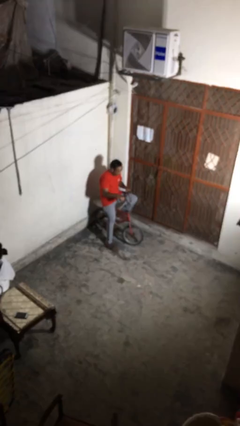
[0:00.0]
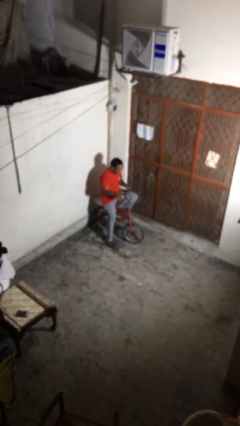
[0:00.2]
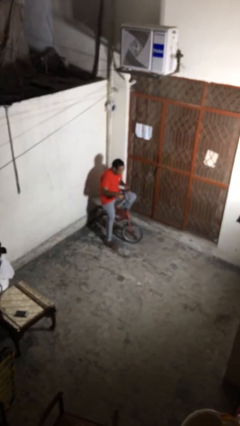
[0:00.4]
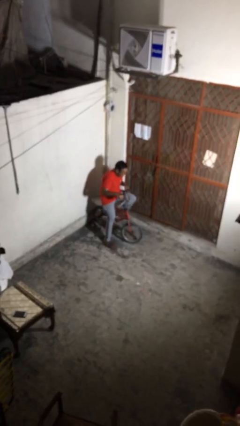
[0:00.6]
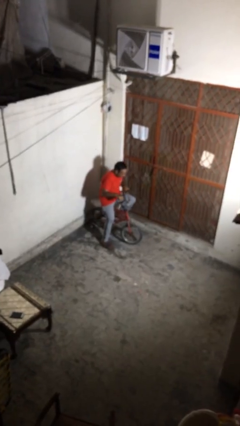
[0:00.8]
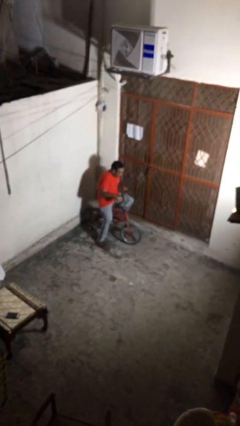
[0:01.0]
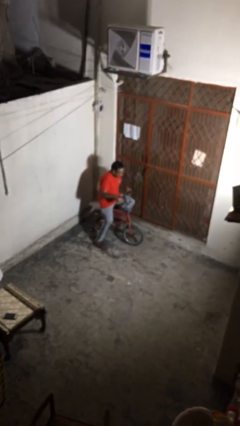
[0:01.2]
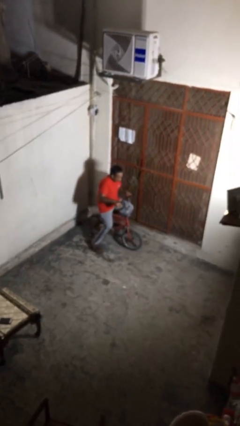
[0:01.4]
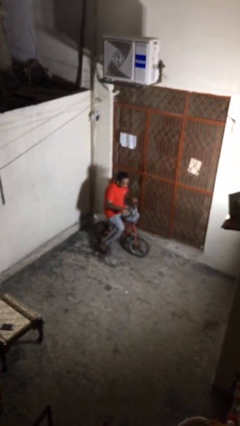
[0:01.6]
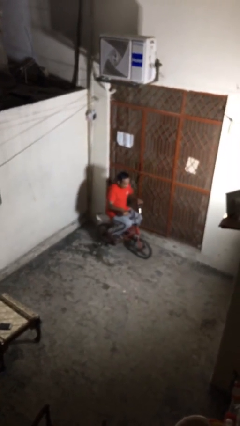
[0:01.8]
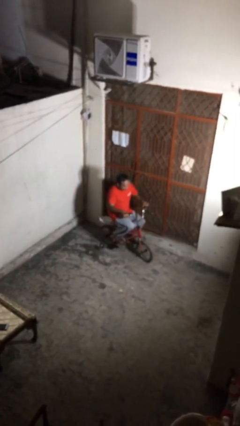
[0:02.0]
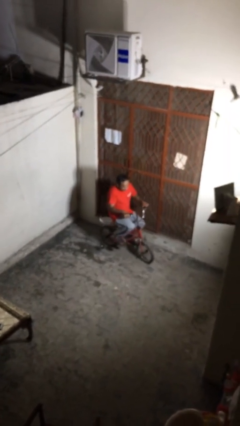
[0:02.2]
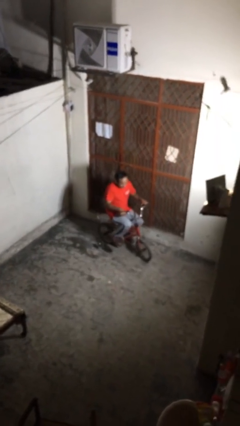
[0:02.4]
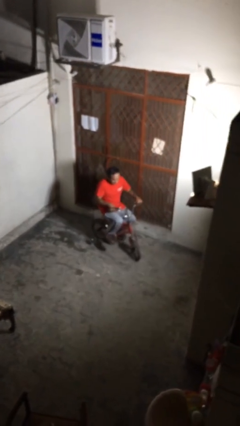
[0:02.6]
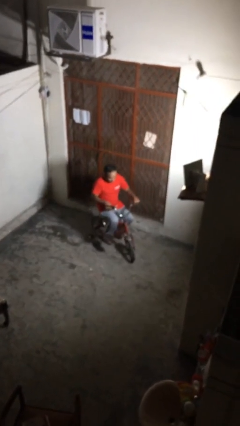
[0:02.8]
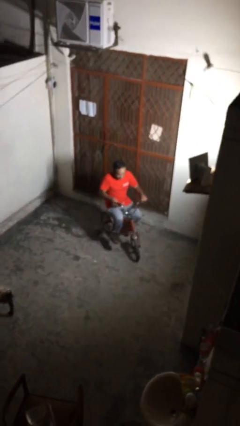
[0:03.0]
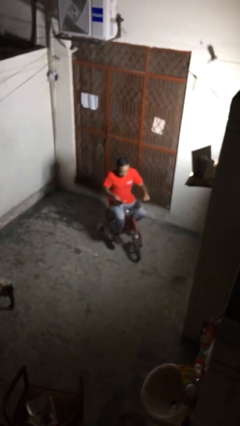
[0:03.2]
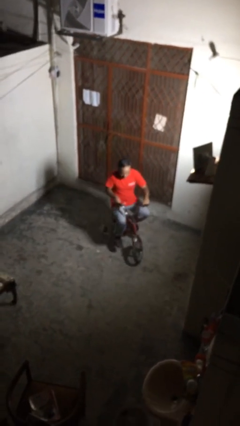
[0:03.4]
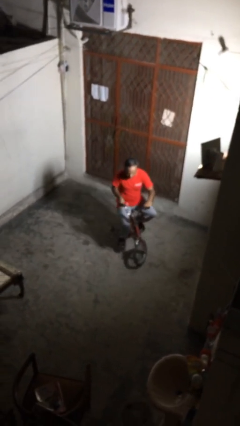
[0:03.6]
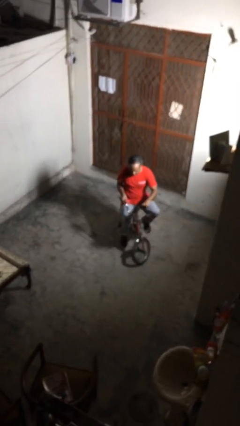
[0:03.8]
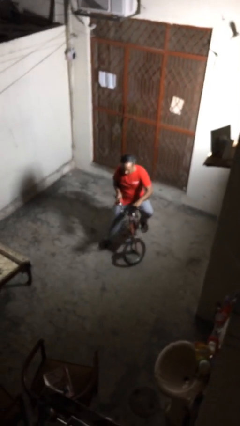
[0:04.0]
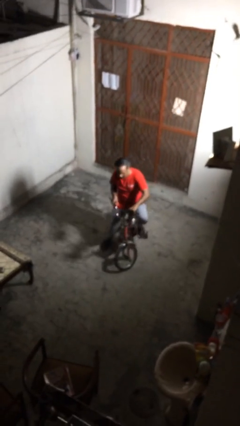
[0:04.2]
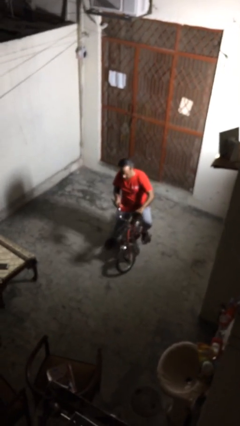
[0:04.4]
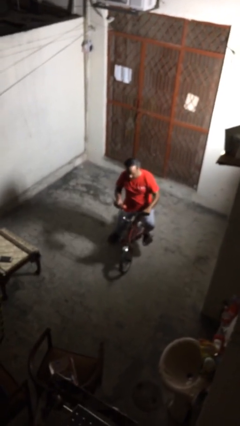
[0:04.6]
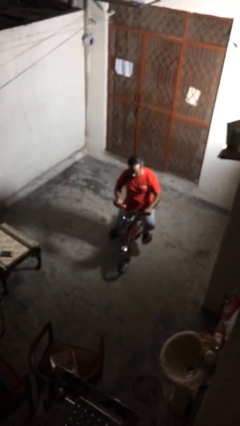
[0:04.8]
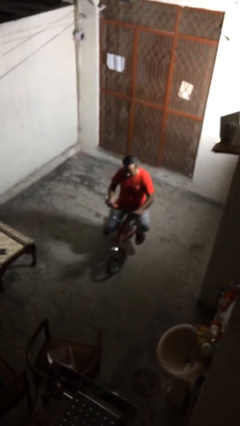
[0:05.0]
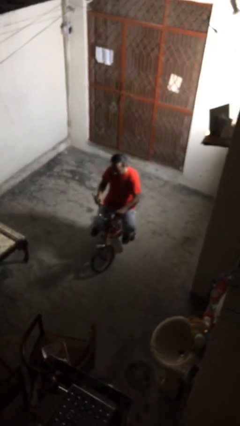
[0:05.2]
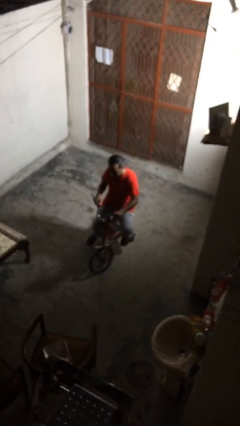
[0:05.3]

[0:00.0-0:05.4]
person rides bicycle

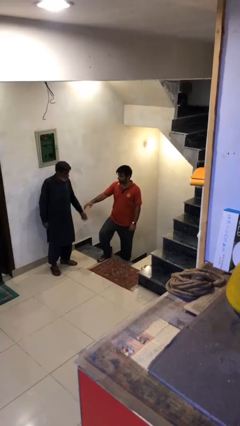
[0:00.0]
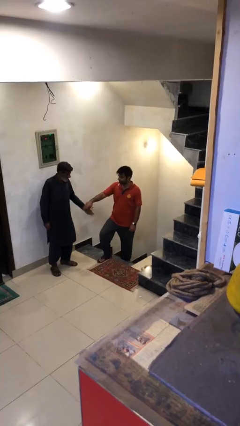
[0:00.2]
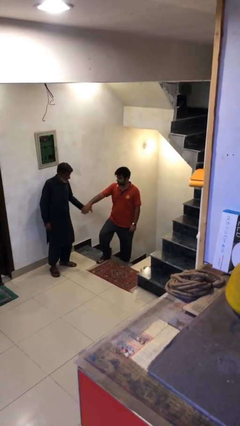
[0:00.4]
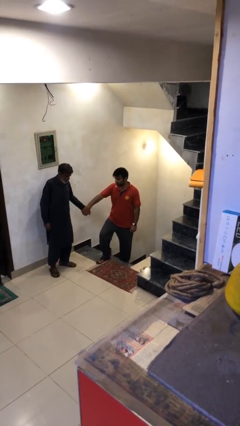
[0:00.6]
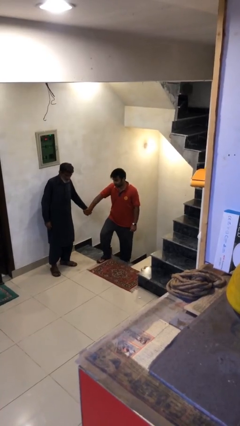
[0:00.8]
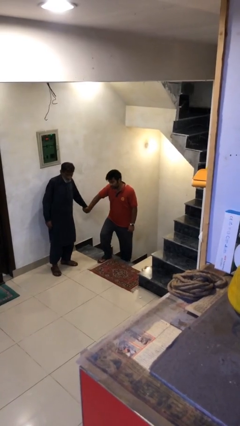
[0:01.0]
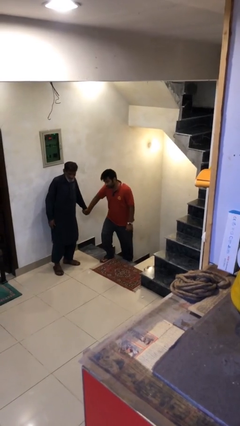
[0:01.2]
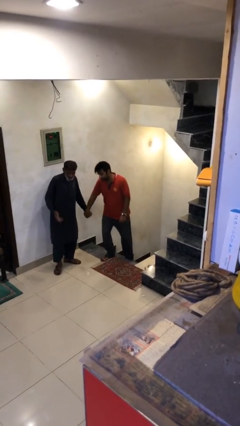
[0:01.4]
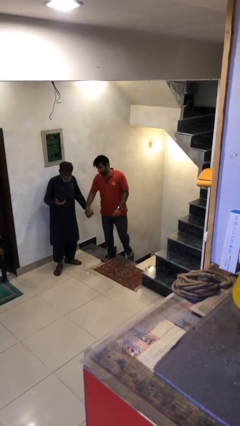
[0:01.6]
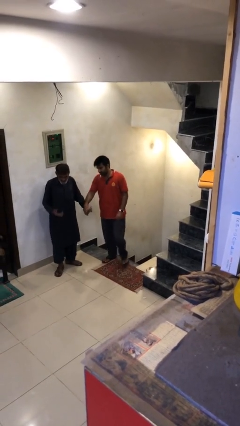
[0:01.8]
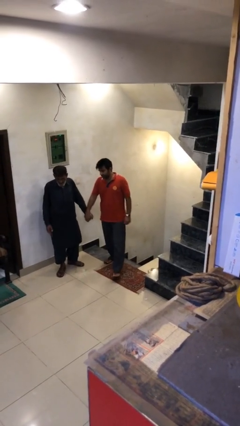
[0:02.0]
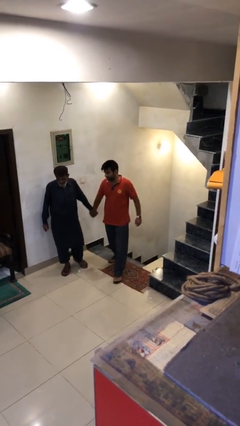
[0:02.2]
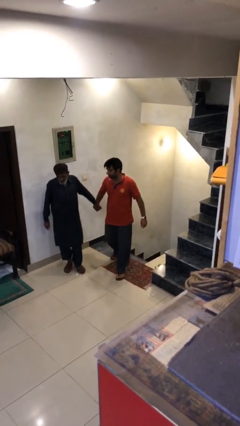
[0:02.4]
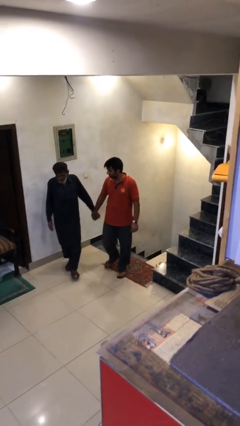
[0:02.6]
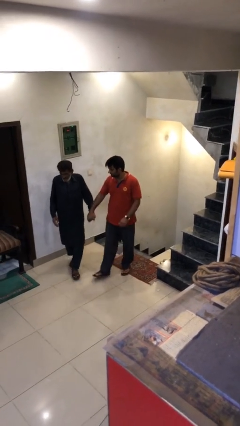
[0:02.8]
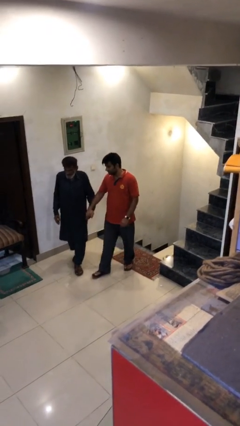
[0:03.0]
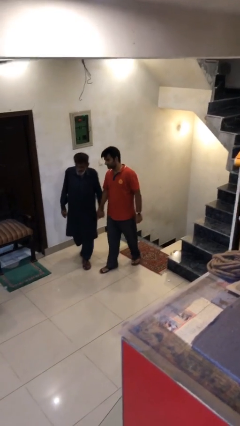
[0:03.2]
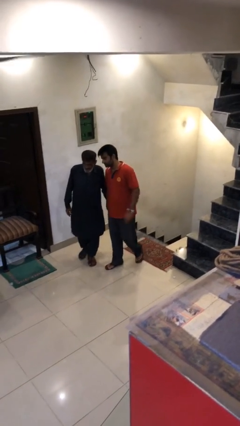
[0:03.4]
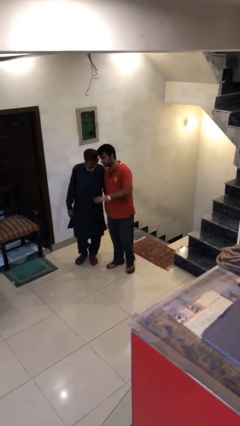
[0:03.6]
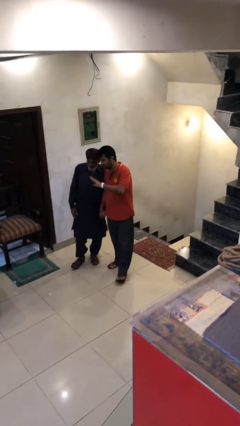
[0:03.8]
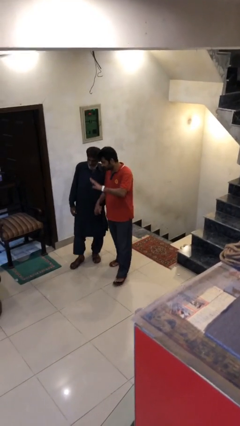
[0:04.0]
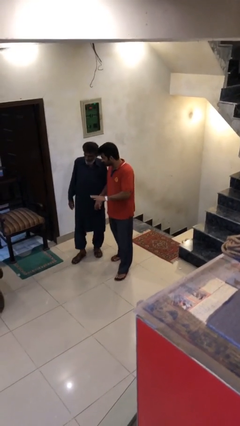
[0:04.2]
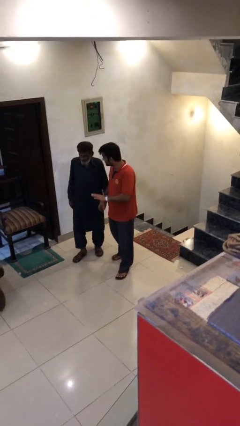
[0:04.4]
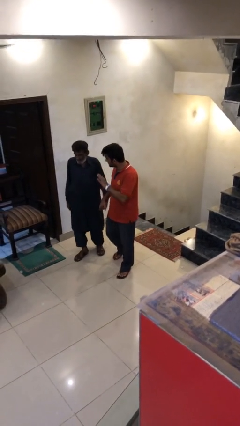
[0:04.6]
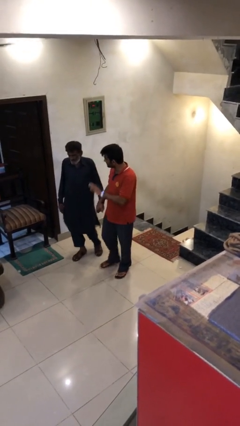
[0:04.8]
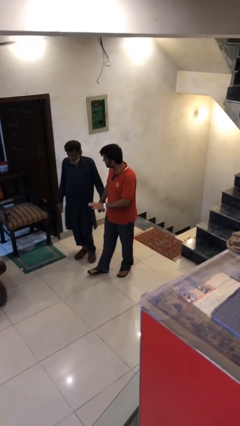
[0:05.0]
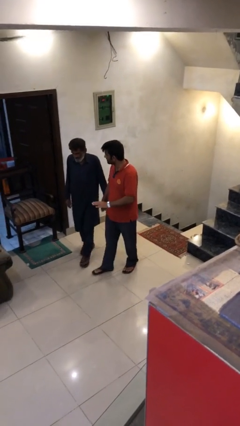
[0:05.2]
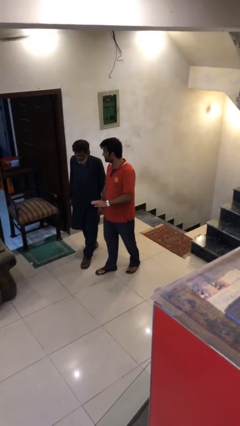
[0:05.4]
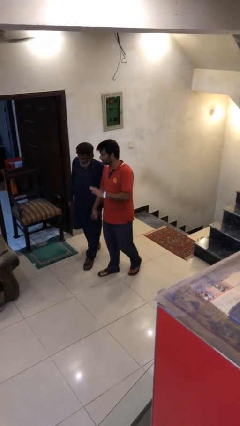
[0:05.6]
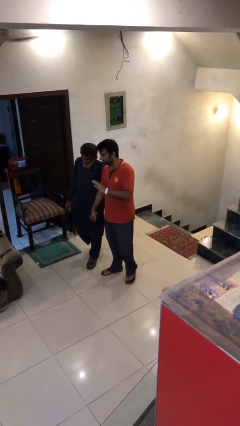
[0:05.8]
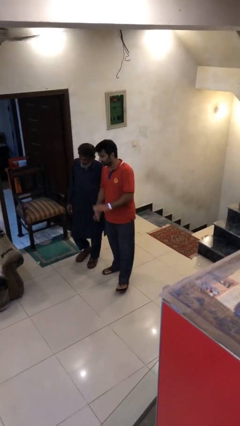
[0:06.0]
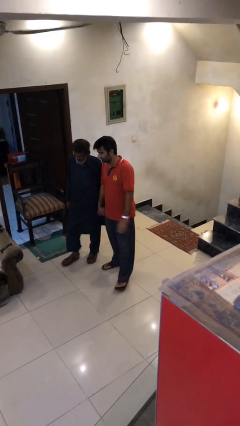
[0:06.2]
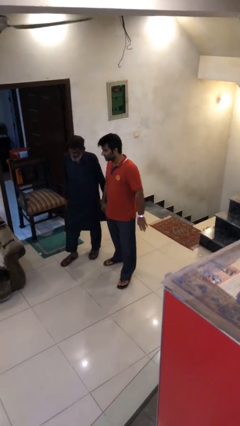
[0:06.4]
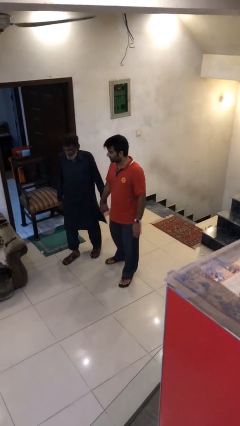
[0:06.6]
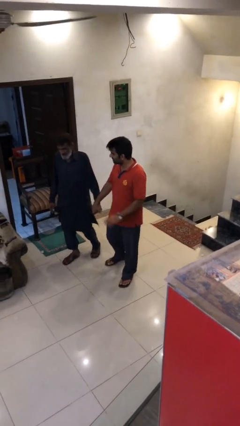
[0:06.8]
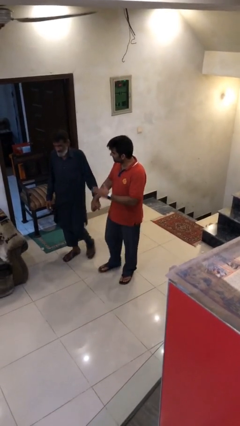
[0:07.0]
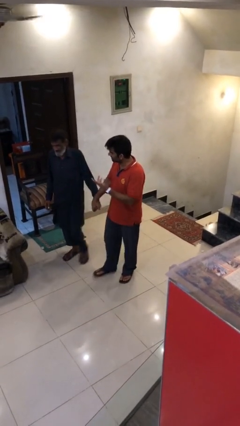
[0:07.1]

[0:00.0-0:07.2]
person holds hand

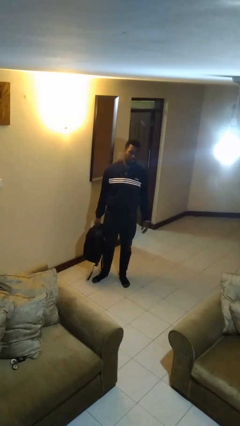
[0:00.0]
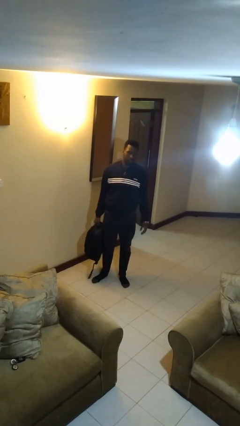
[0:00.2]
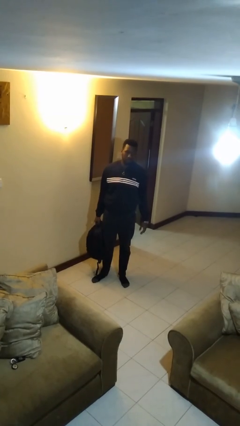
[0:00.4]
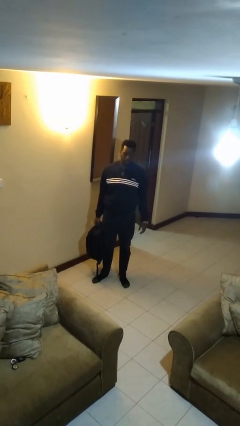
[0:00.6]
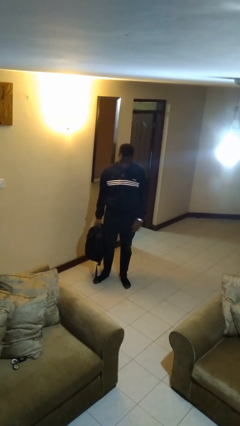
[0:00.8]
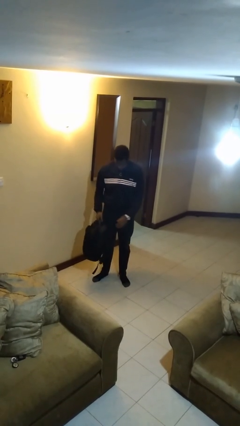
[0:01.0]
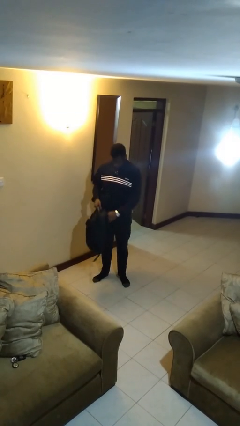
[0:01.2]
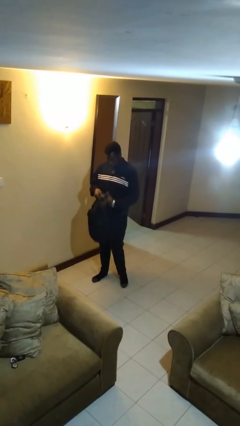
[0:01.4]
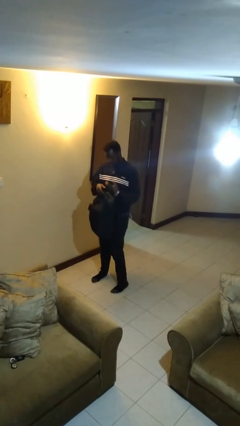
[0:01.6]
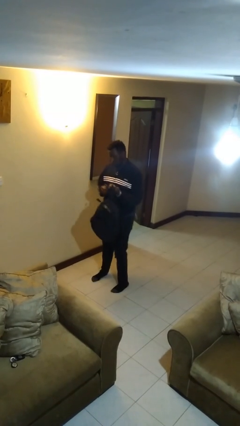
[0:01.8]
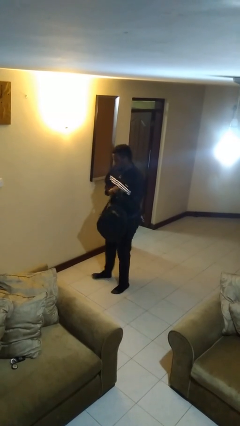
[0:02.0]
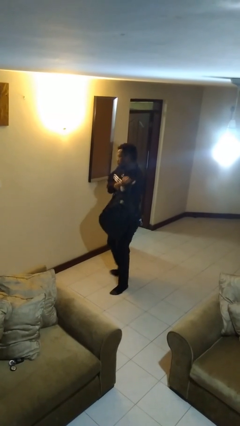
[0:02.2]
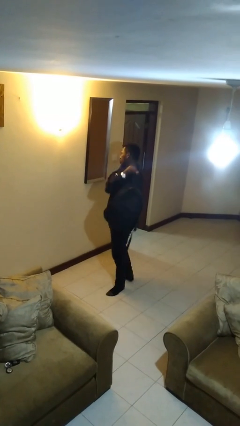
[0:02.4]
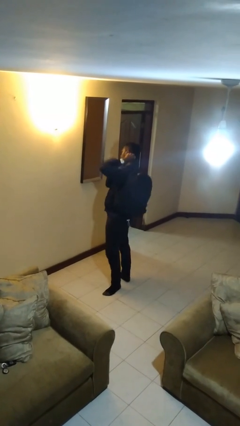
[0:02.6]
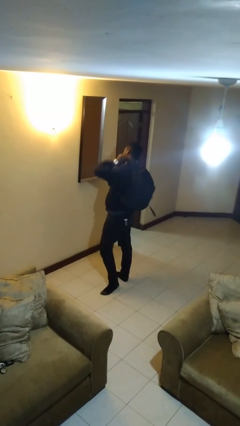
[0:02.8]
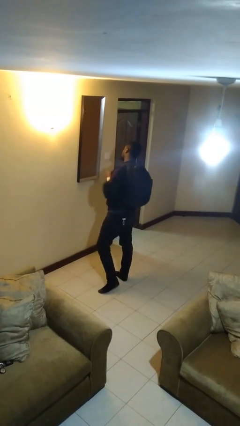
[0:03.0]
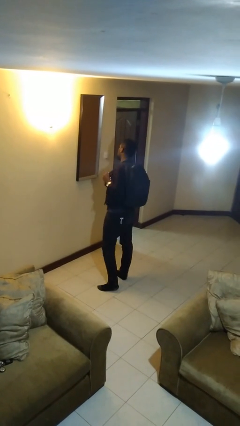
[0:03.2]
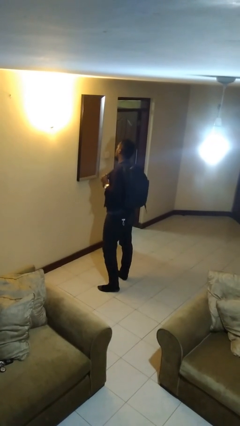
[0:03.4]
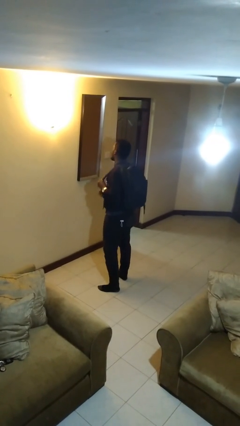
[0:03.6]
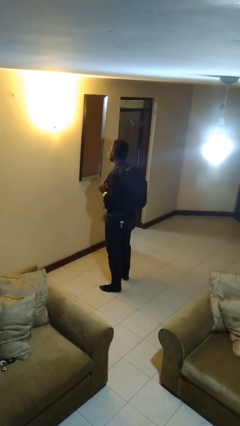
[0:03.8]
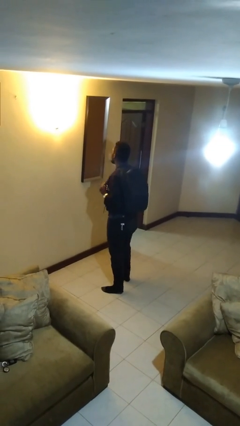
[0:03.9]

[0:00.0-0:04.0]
person puts on backpack

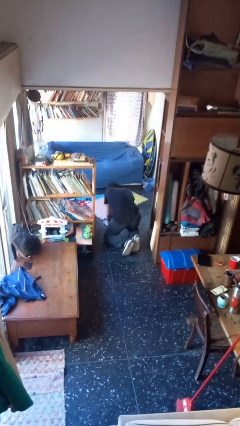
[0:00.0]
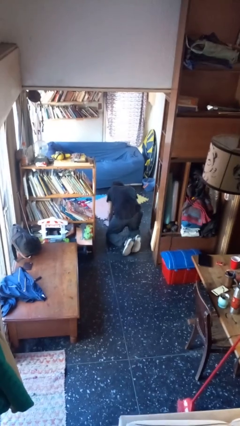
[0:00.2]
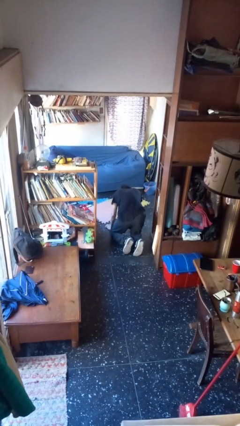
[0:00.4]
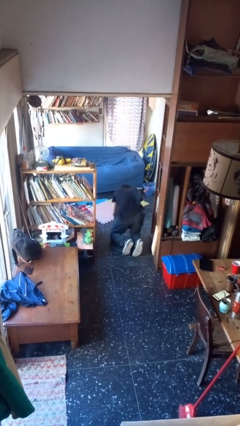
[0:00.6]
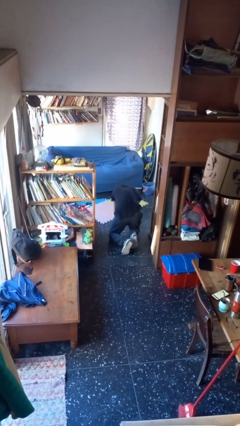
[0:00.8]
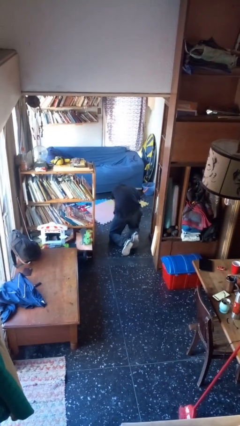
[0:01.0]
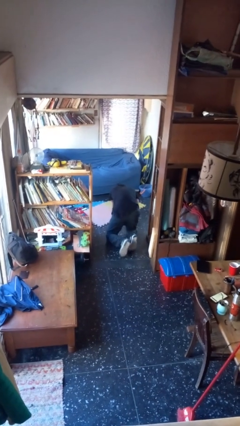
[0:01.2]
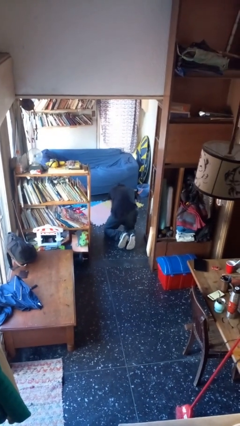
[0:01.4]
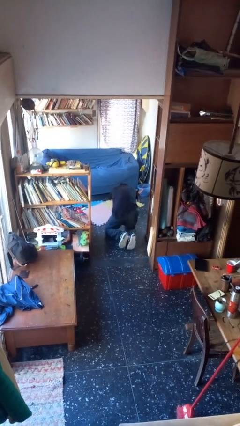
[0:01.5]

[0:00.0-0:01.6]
person crawls
